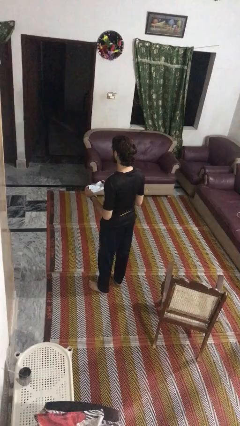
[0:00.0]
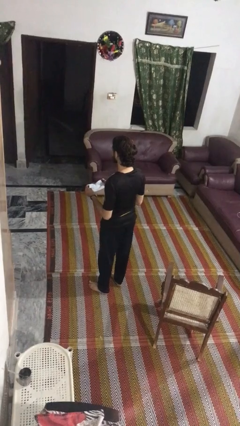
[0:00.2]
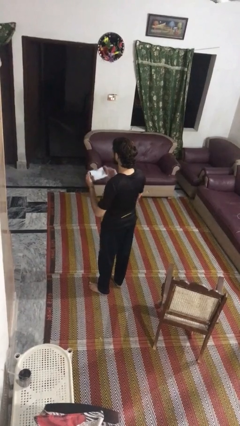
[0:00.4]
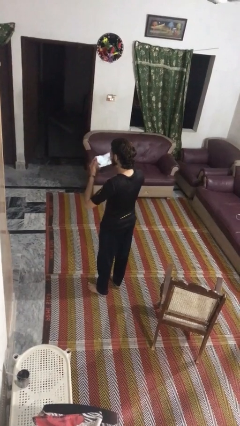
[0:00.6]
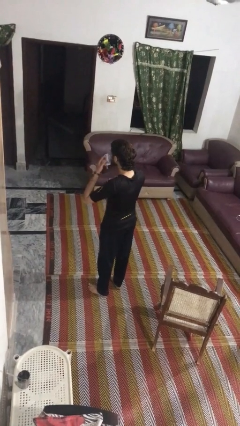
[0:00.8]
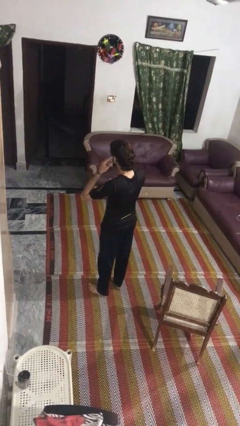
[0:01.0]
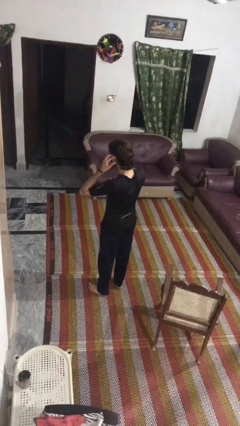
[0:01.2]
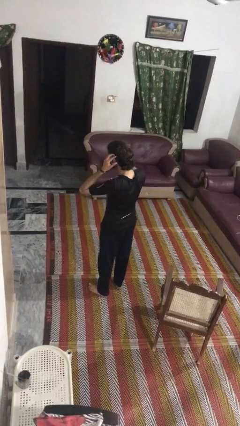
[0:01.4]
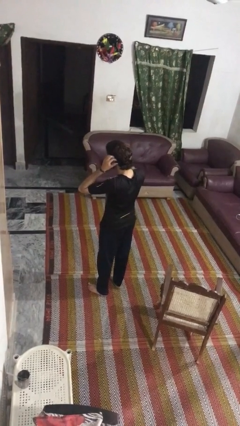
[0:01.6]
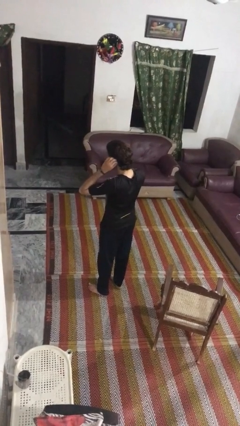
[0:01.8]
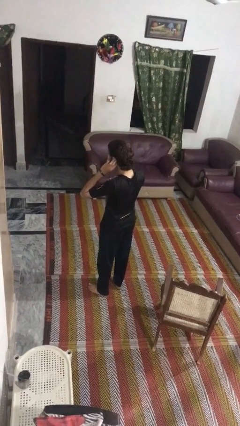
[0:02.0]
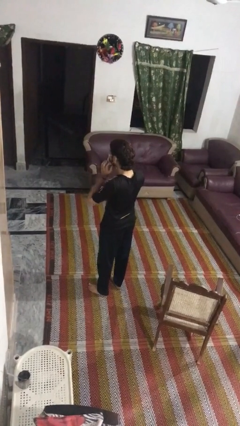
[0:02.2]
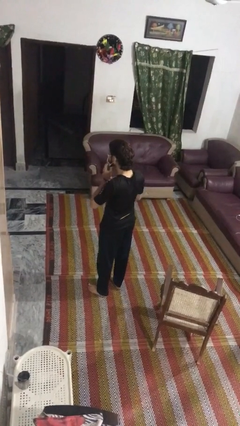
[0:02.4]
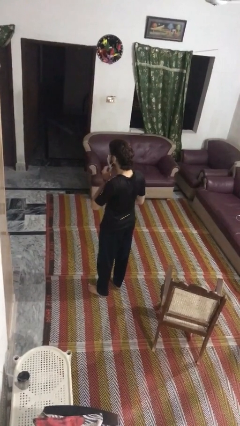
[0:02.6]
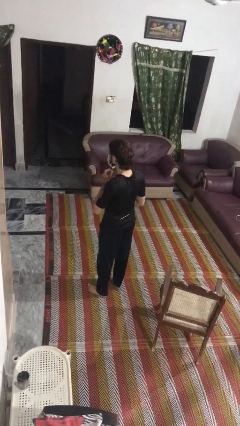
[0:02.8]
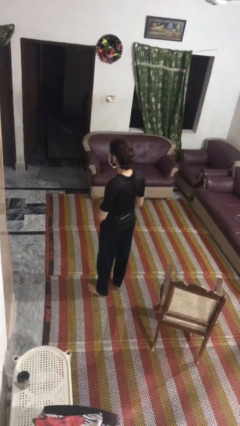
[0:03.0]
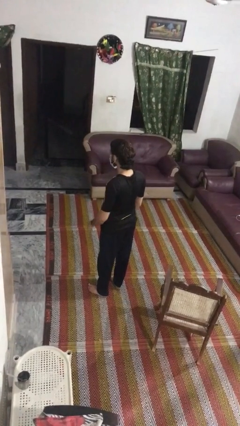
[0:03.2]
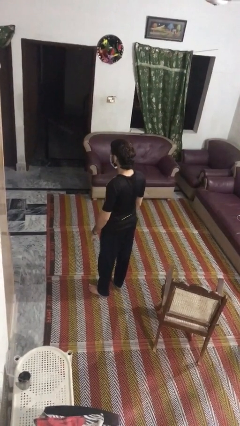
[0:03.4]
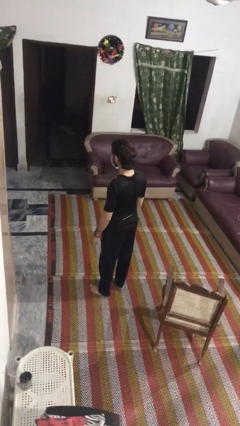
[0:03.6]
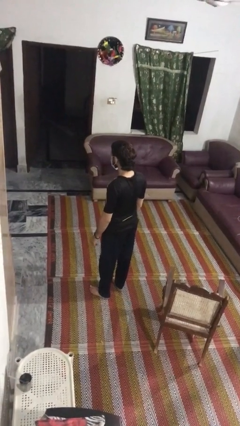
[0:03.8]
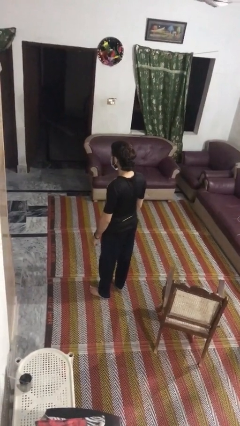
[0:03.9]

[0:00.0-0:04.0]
person puts on facemask

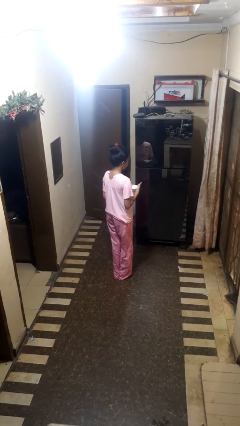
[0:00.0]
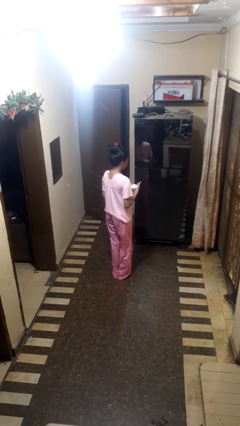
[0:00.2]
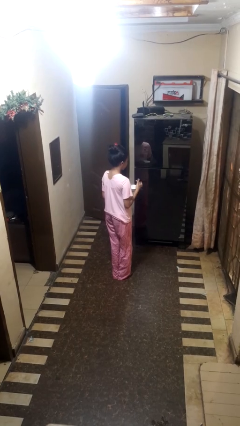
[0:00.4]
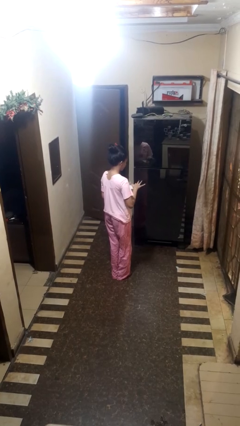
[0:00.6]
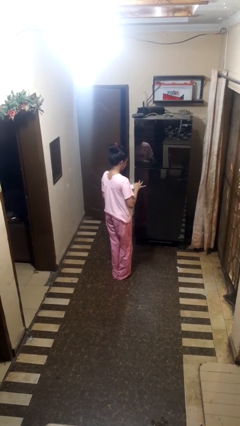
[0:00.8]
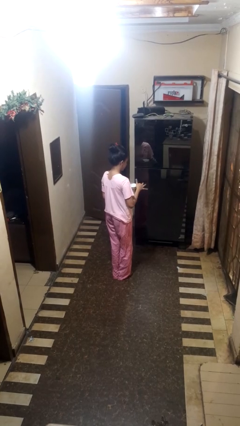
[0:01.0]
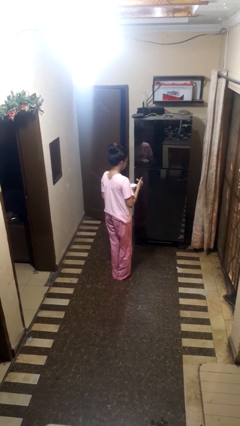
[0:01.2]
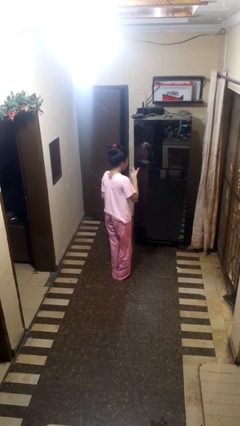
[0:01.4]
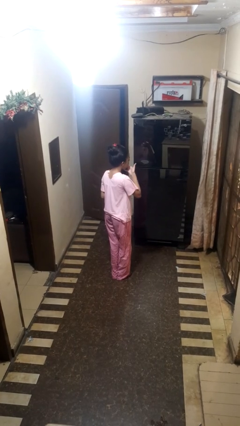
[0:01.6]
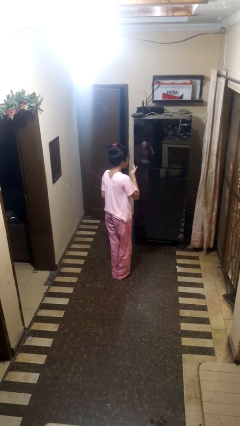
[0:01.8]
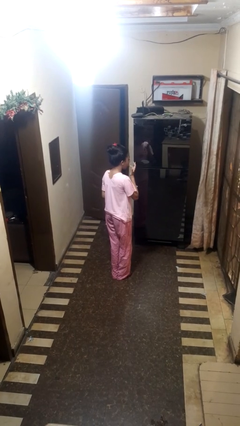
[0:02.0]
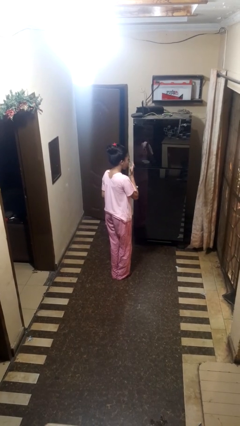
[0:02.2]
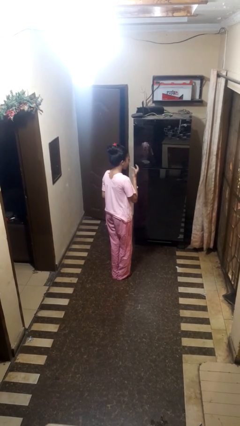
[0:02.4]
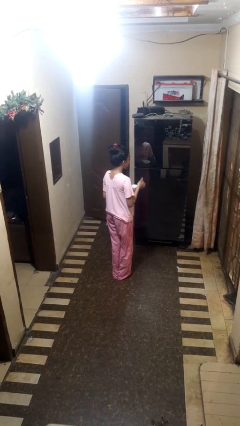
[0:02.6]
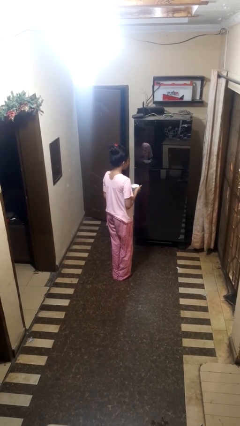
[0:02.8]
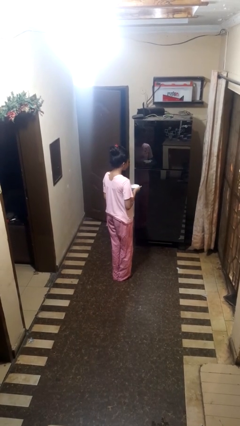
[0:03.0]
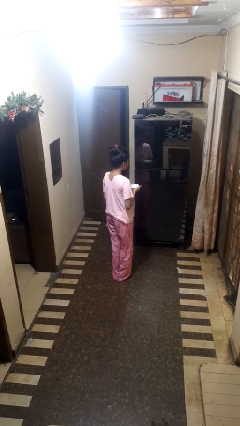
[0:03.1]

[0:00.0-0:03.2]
person licks fingers

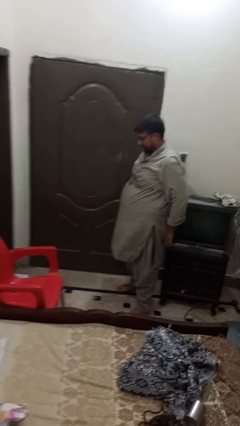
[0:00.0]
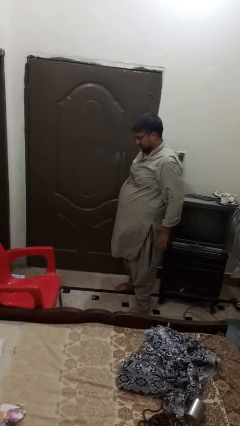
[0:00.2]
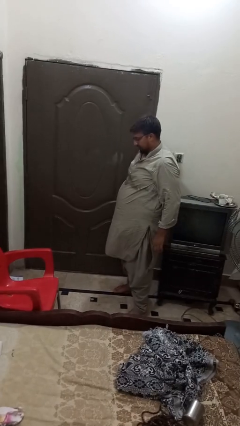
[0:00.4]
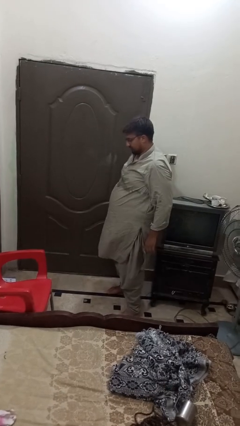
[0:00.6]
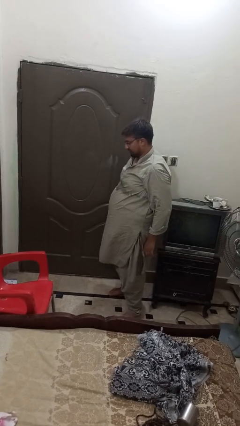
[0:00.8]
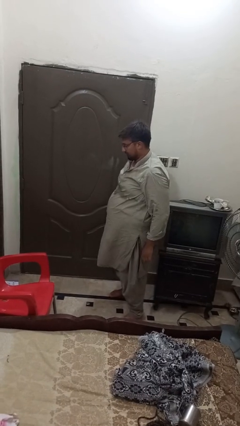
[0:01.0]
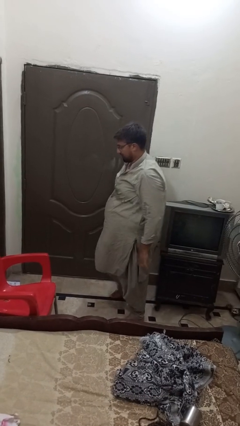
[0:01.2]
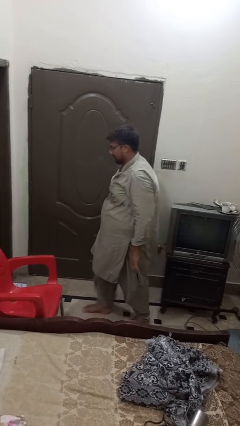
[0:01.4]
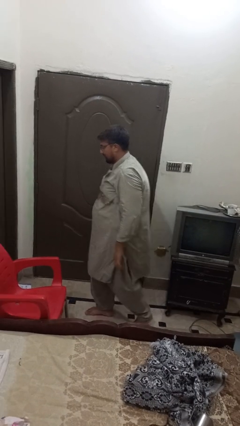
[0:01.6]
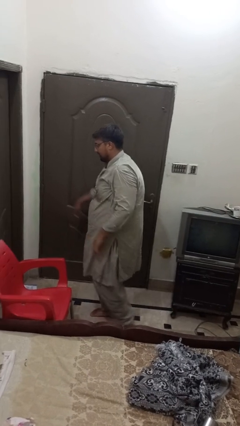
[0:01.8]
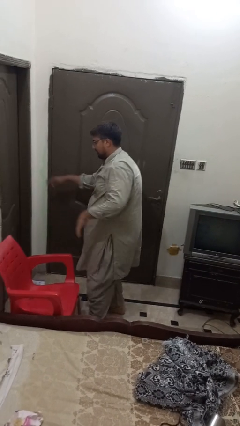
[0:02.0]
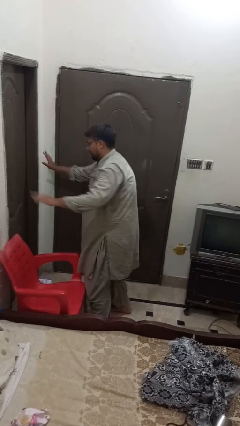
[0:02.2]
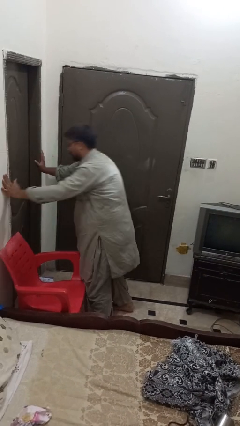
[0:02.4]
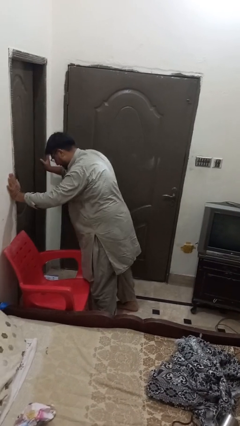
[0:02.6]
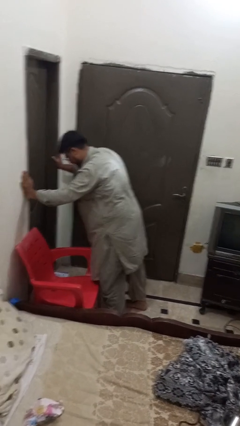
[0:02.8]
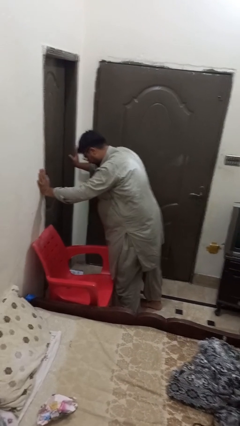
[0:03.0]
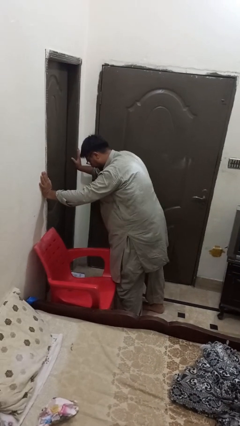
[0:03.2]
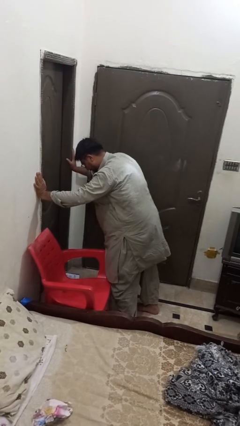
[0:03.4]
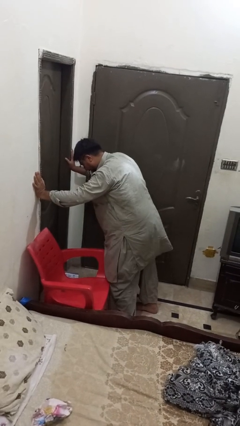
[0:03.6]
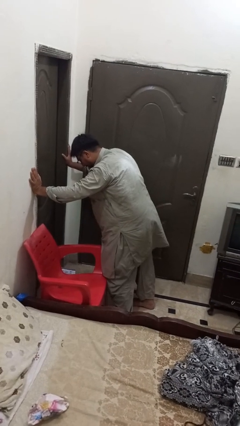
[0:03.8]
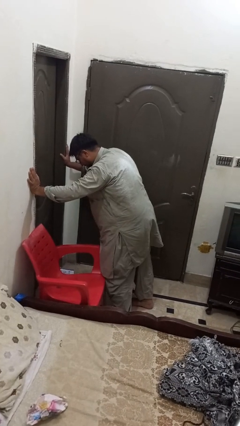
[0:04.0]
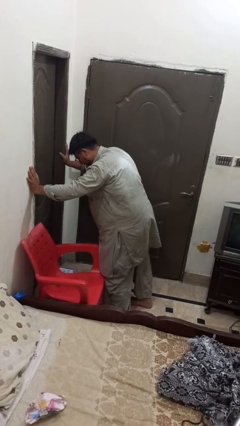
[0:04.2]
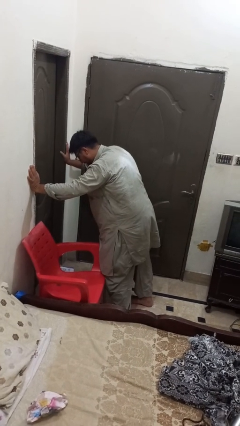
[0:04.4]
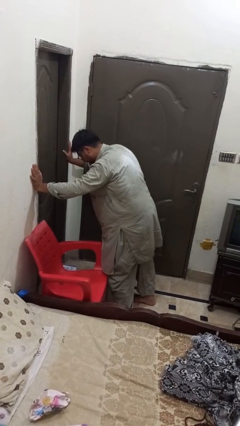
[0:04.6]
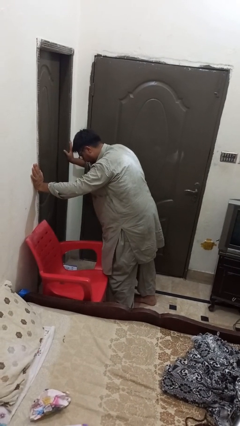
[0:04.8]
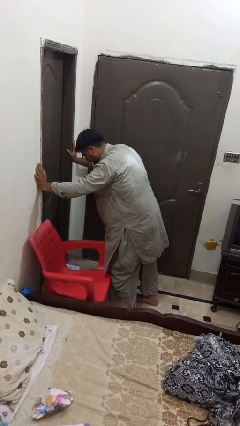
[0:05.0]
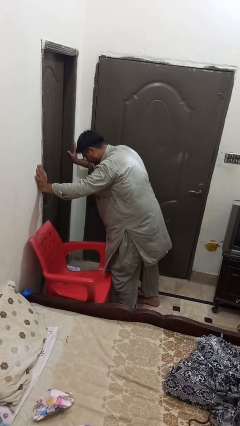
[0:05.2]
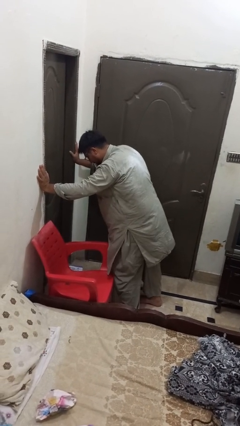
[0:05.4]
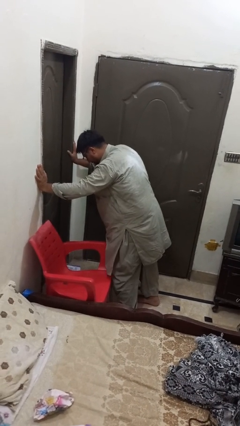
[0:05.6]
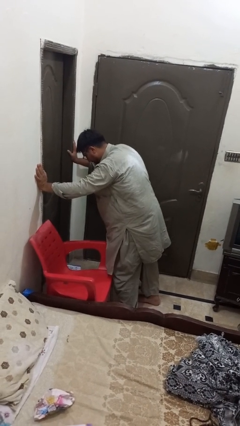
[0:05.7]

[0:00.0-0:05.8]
person trips on object on floor

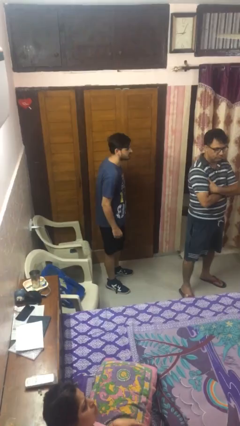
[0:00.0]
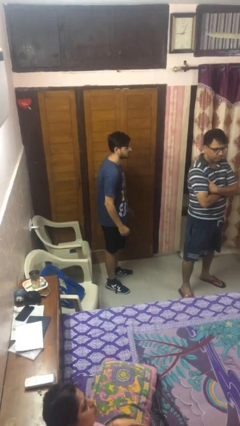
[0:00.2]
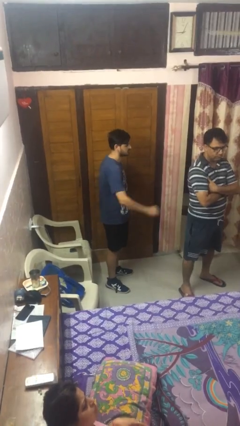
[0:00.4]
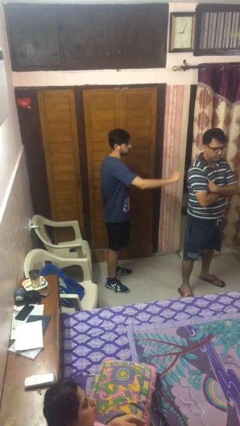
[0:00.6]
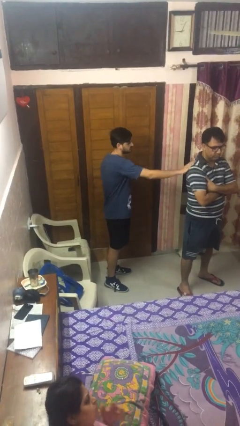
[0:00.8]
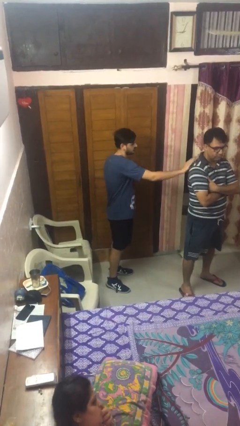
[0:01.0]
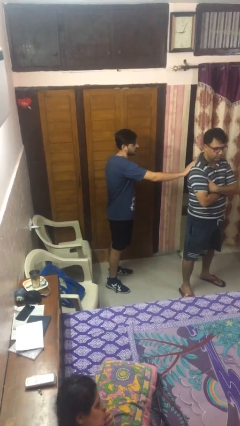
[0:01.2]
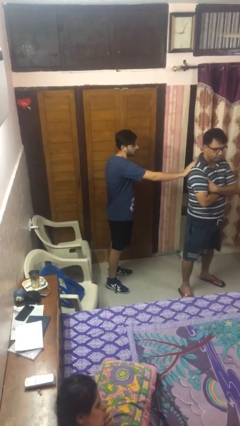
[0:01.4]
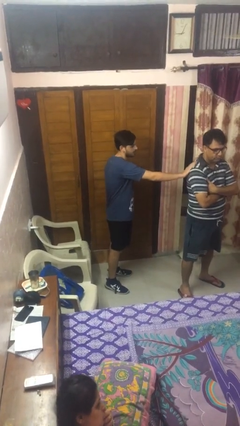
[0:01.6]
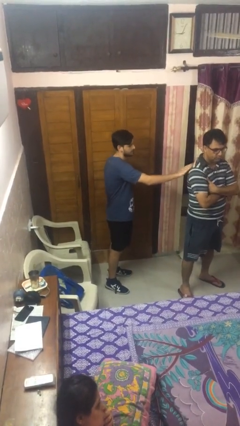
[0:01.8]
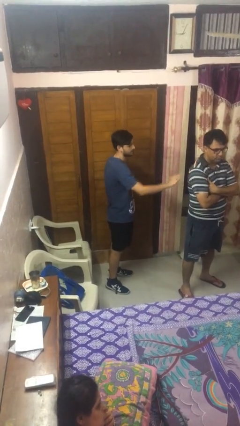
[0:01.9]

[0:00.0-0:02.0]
person touches back of person

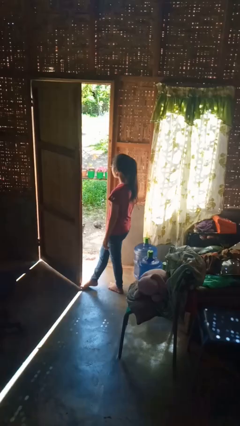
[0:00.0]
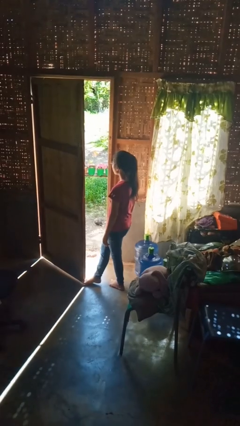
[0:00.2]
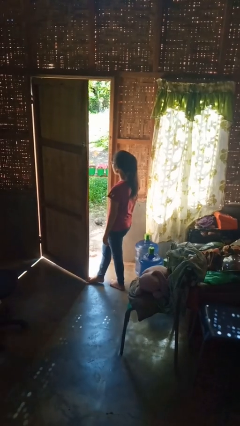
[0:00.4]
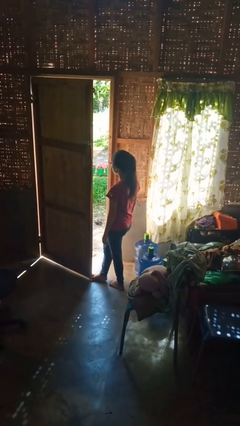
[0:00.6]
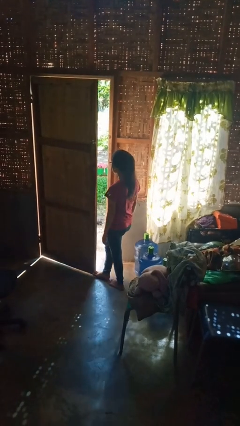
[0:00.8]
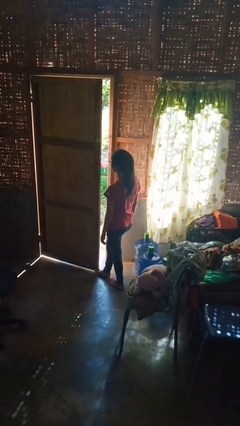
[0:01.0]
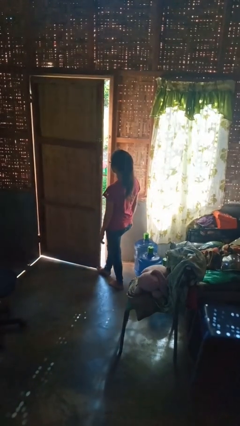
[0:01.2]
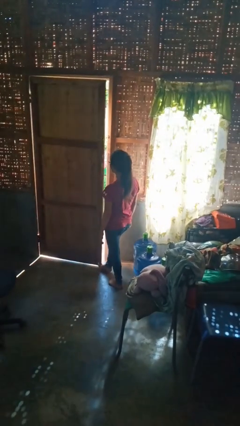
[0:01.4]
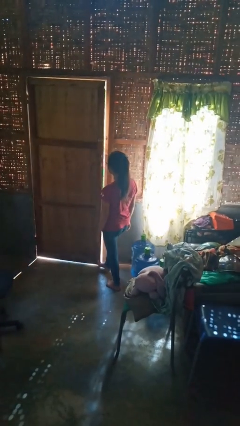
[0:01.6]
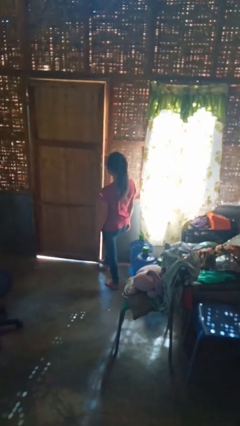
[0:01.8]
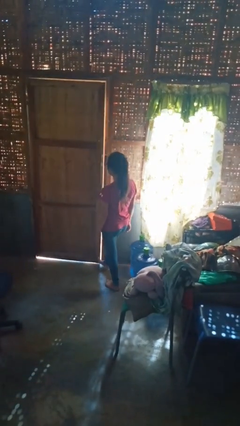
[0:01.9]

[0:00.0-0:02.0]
person closes door with foot

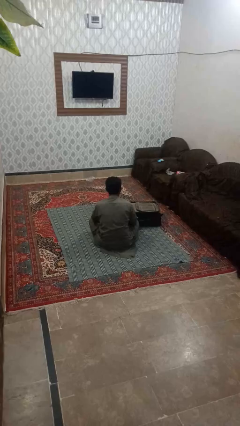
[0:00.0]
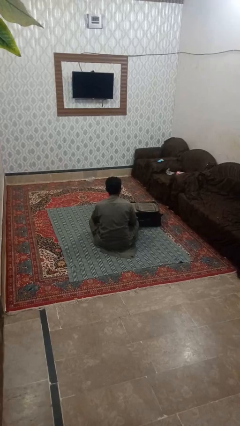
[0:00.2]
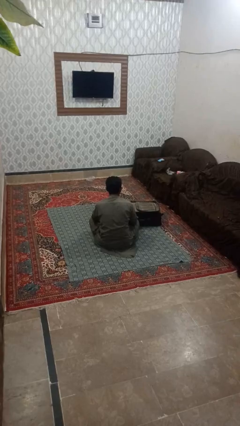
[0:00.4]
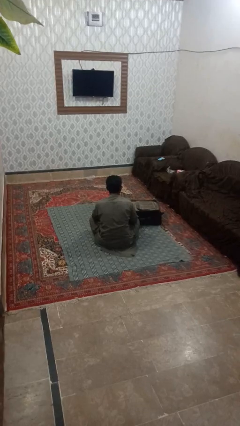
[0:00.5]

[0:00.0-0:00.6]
person closes suitcase
